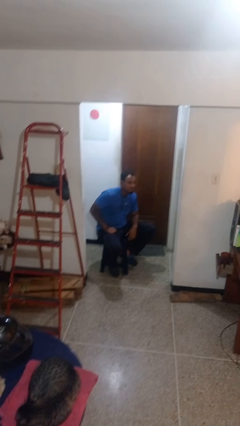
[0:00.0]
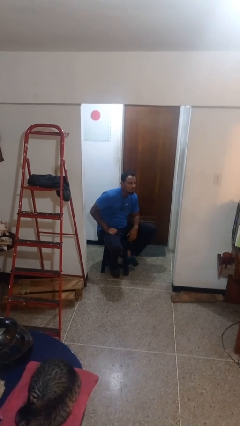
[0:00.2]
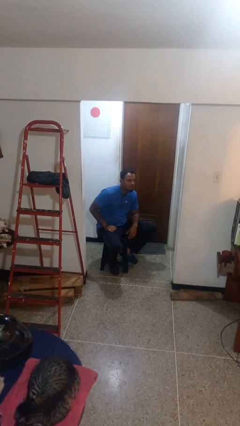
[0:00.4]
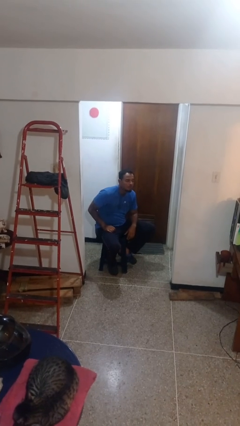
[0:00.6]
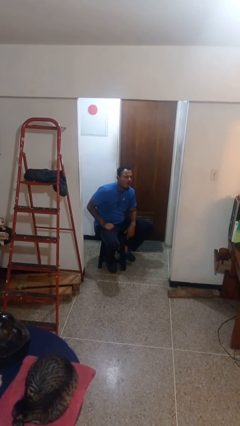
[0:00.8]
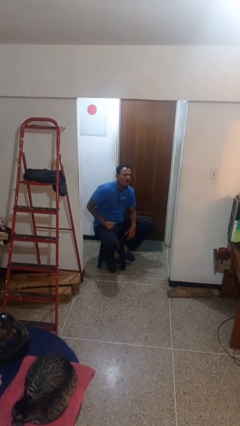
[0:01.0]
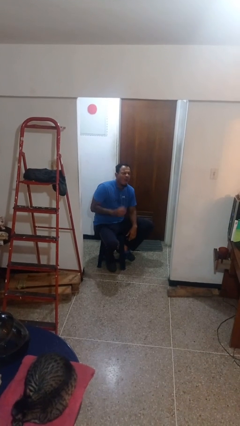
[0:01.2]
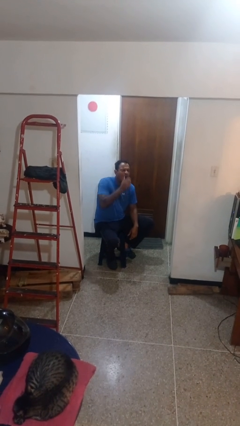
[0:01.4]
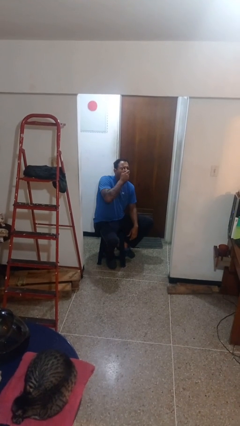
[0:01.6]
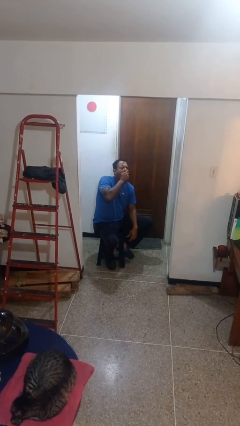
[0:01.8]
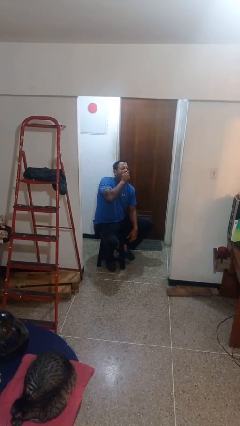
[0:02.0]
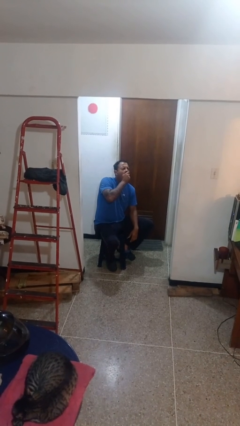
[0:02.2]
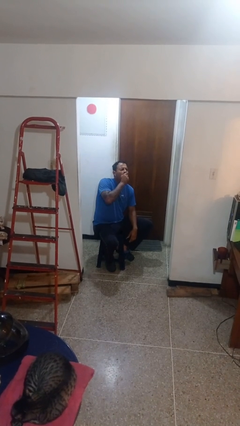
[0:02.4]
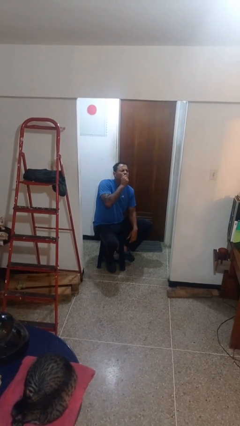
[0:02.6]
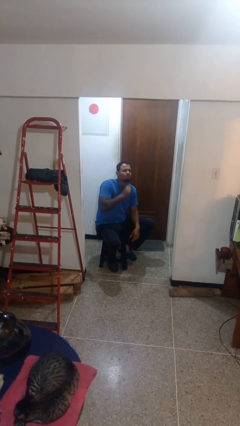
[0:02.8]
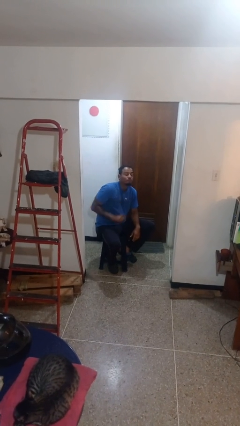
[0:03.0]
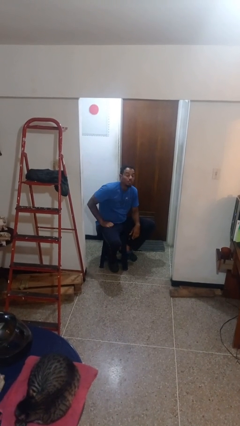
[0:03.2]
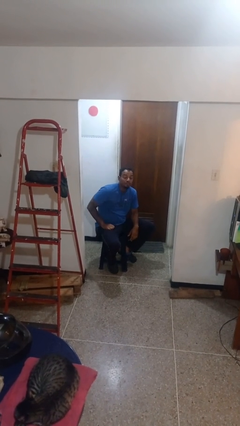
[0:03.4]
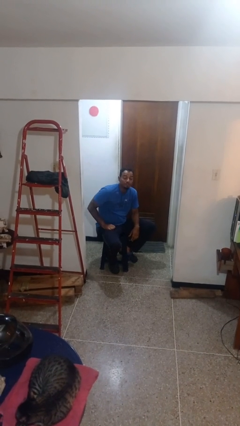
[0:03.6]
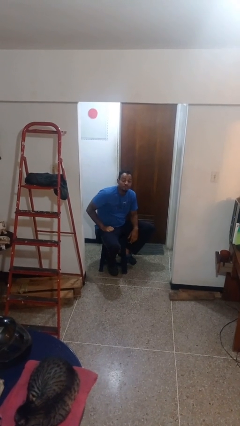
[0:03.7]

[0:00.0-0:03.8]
person yawns

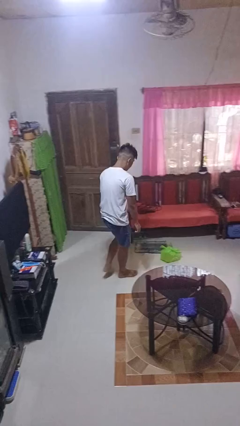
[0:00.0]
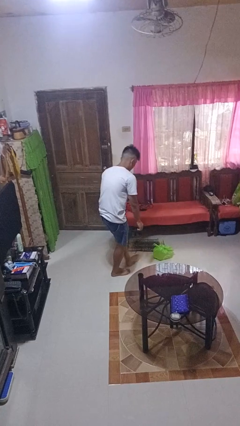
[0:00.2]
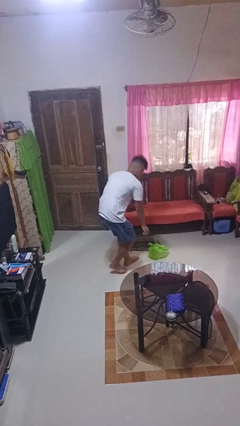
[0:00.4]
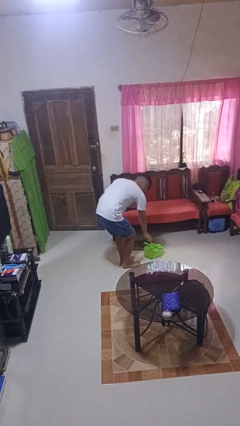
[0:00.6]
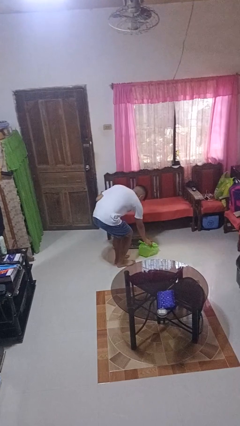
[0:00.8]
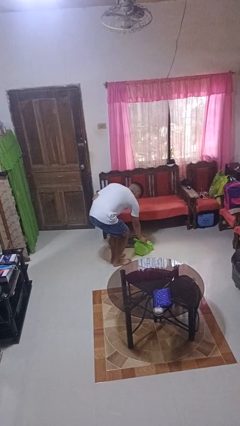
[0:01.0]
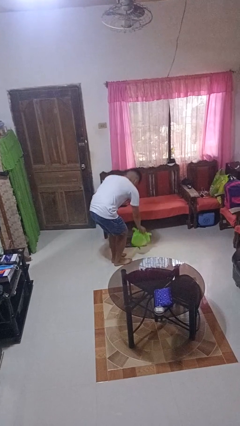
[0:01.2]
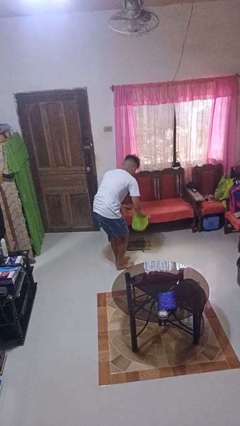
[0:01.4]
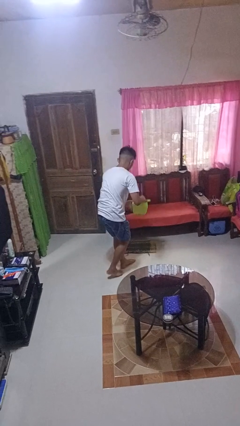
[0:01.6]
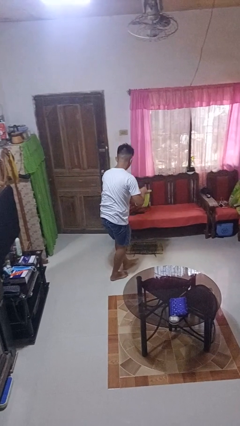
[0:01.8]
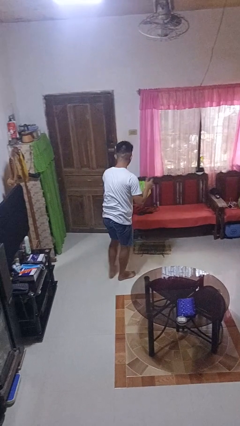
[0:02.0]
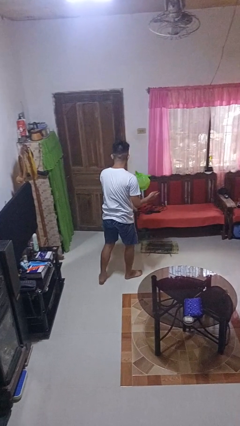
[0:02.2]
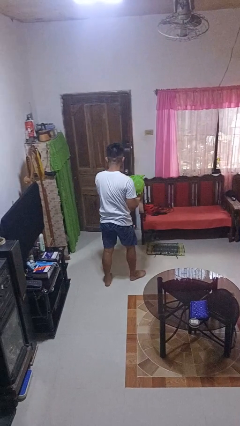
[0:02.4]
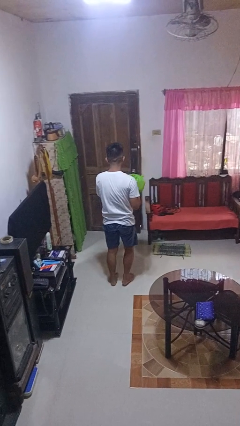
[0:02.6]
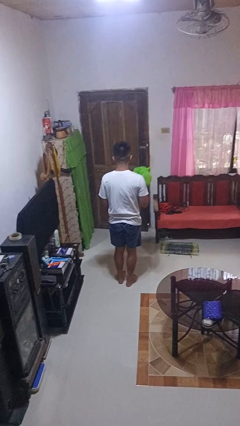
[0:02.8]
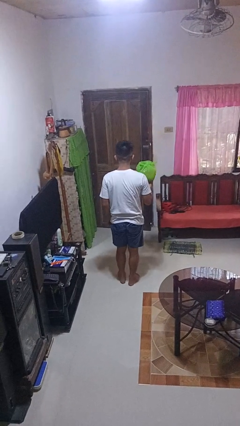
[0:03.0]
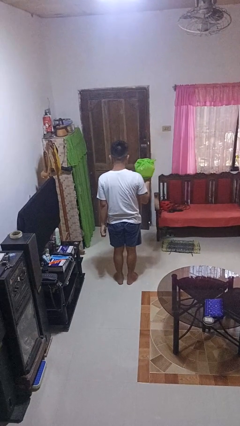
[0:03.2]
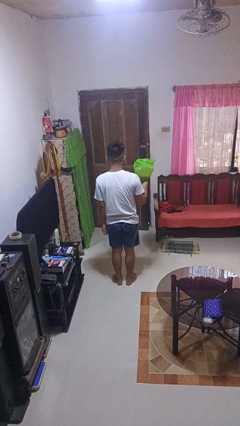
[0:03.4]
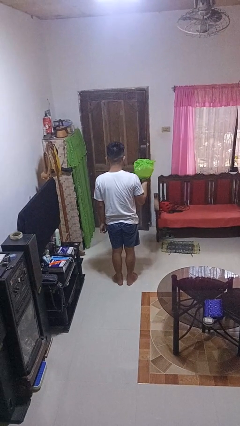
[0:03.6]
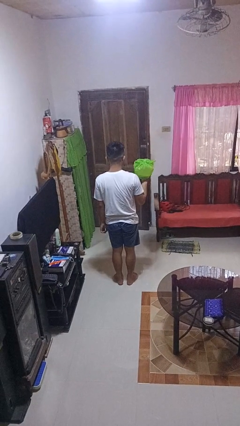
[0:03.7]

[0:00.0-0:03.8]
person picks up object from floor

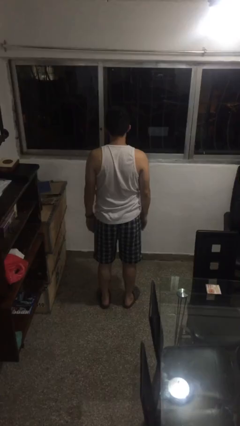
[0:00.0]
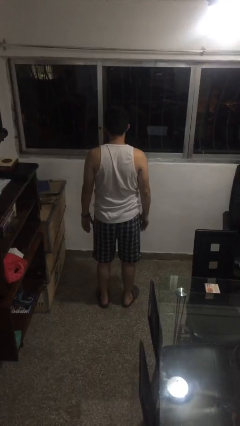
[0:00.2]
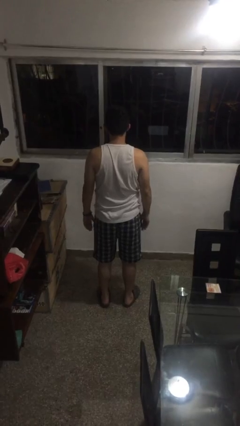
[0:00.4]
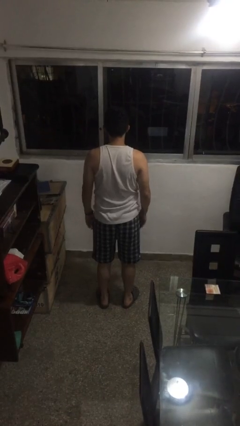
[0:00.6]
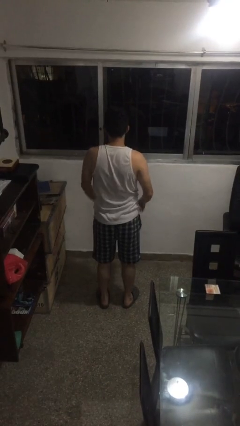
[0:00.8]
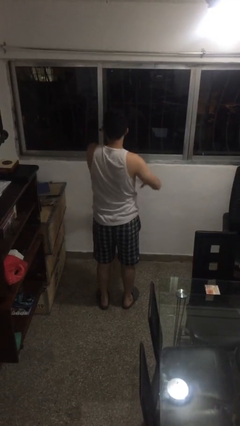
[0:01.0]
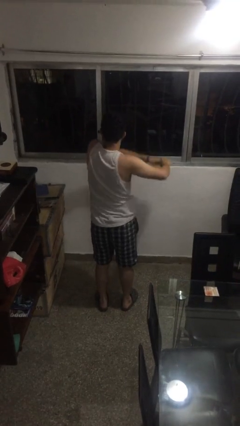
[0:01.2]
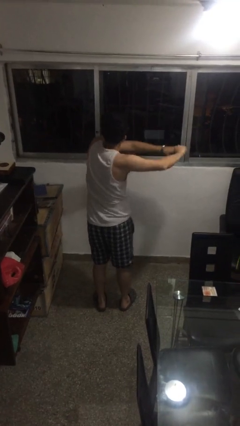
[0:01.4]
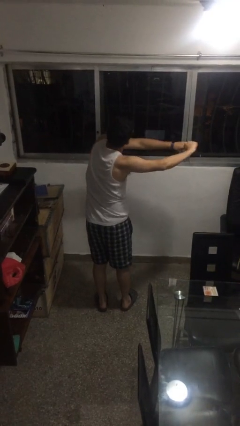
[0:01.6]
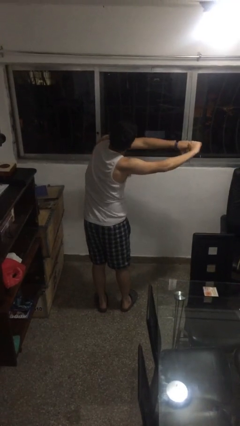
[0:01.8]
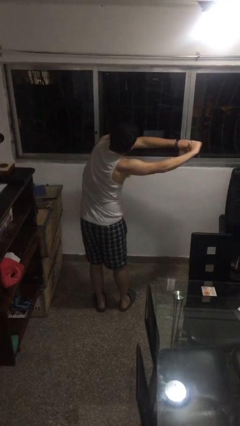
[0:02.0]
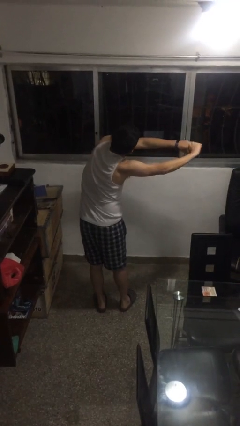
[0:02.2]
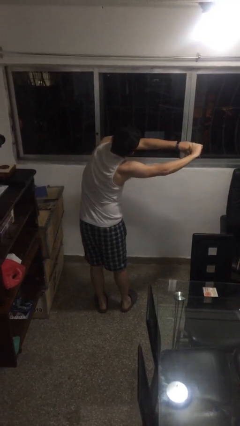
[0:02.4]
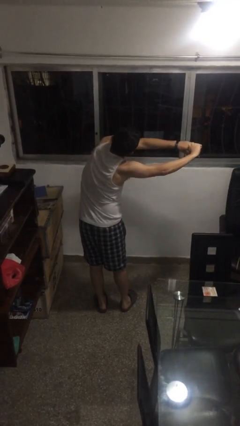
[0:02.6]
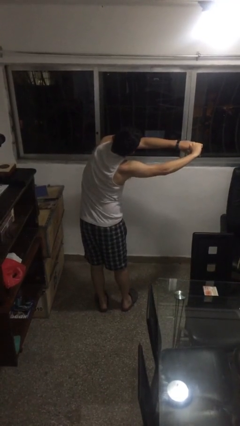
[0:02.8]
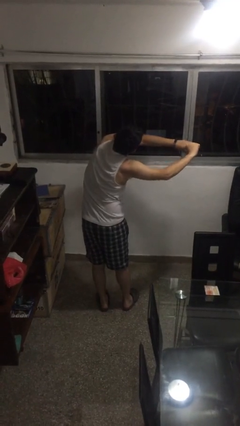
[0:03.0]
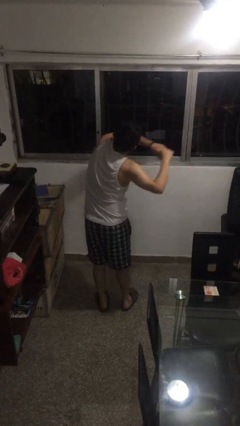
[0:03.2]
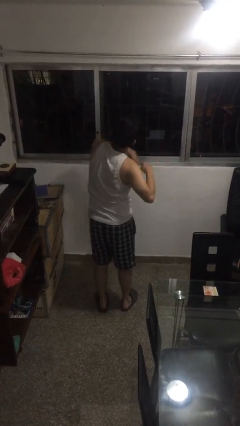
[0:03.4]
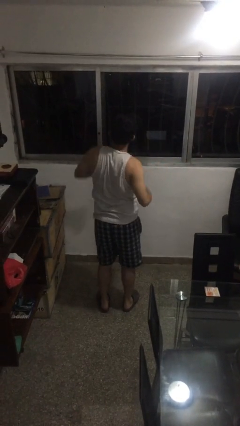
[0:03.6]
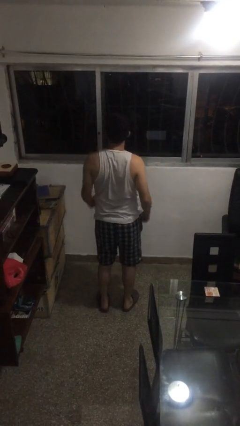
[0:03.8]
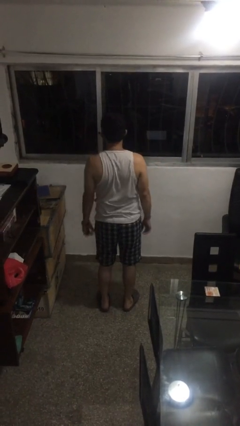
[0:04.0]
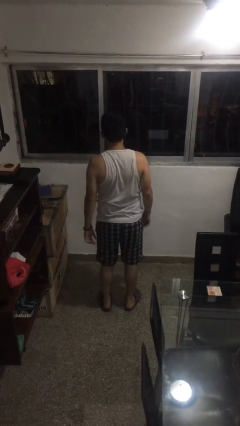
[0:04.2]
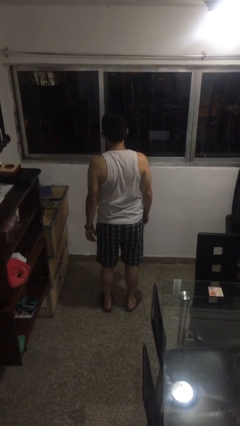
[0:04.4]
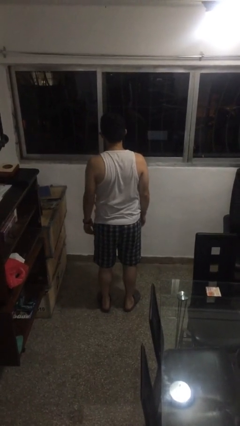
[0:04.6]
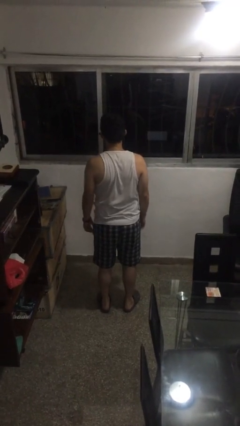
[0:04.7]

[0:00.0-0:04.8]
person stretches arms to side

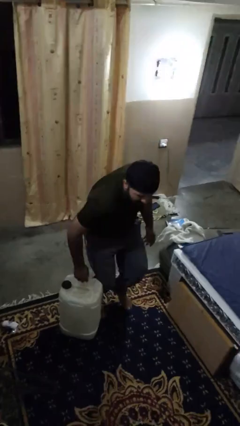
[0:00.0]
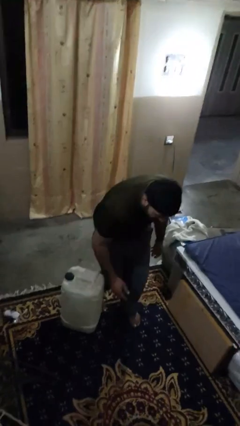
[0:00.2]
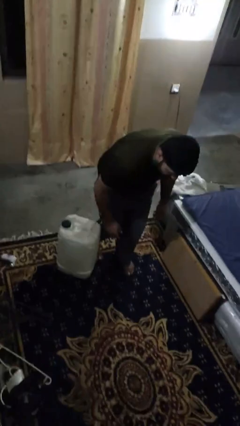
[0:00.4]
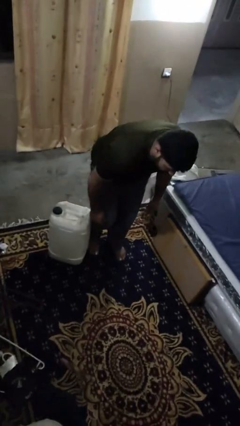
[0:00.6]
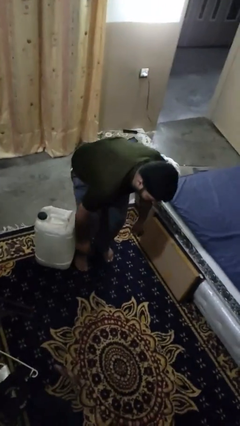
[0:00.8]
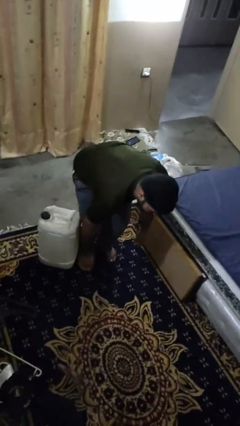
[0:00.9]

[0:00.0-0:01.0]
person trips on object on floor

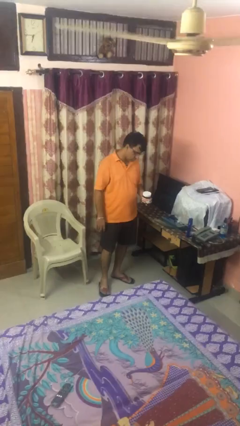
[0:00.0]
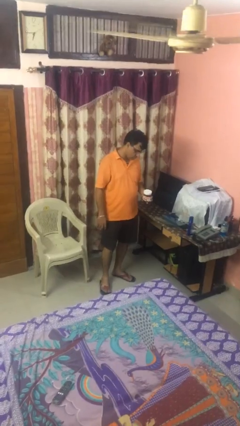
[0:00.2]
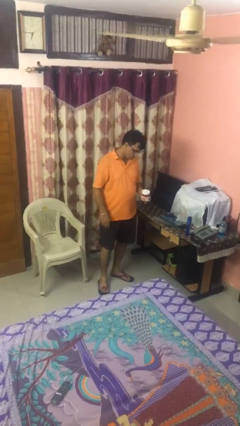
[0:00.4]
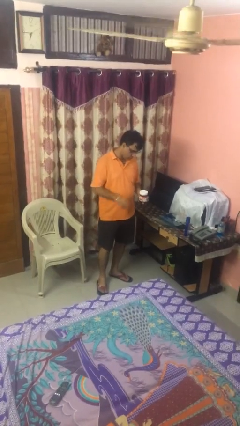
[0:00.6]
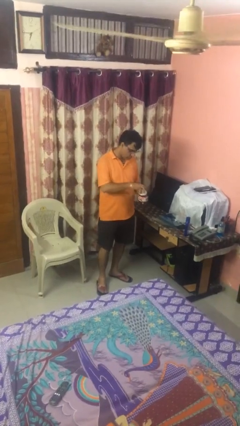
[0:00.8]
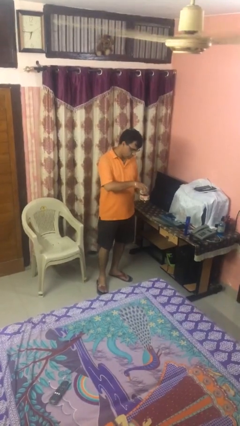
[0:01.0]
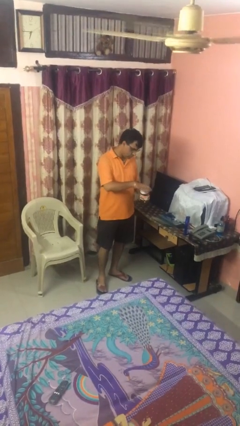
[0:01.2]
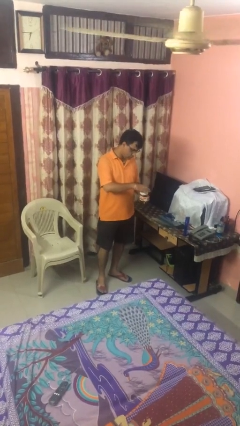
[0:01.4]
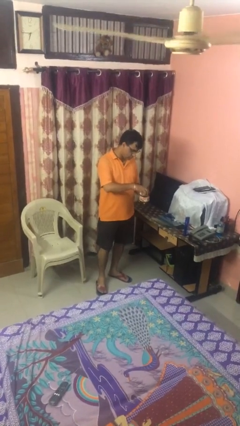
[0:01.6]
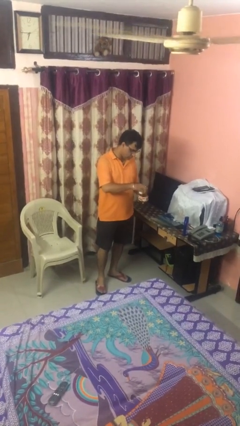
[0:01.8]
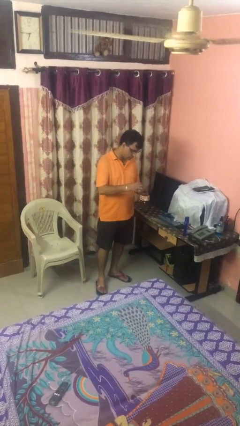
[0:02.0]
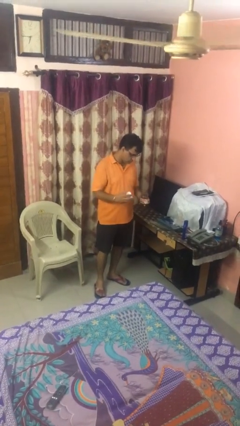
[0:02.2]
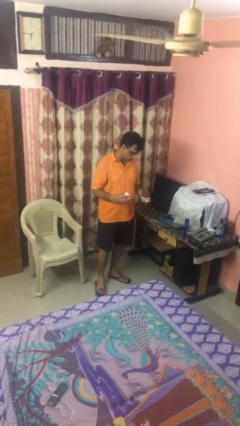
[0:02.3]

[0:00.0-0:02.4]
person opens jar

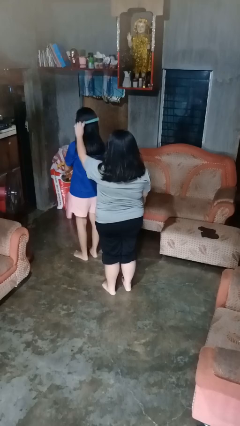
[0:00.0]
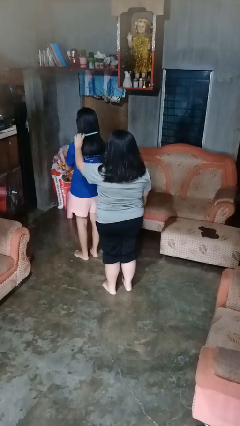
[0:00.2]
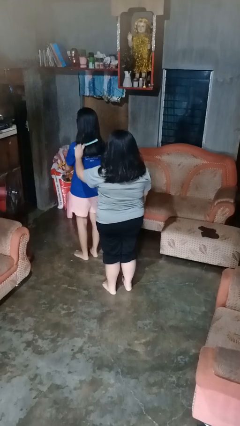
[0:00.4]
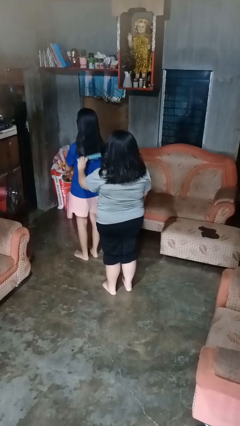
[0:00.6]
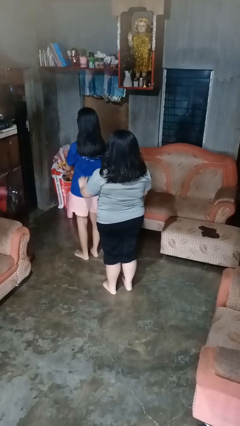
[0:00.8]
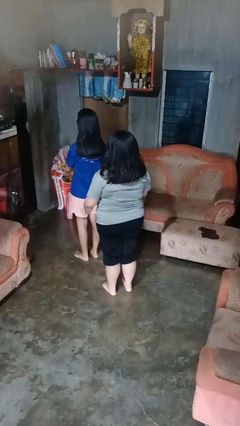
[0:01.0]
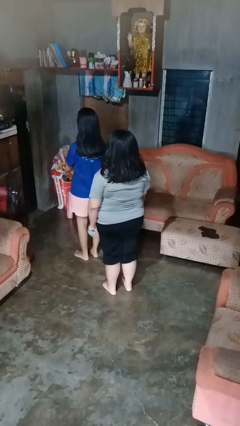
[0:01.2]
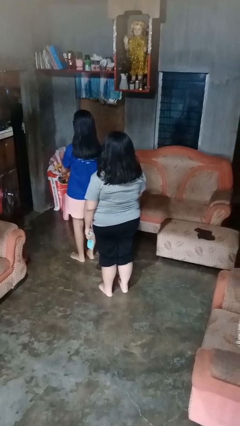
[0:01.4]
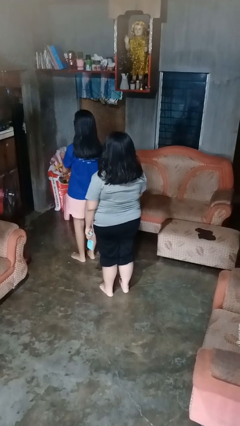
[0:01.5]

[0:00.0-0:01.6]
person brushes hair of person
